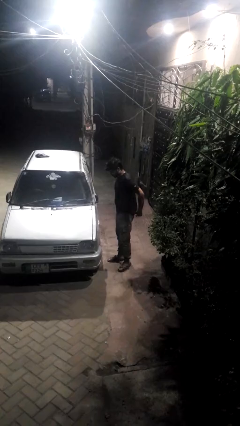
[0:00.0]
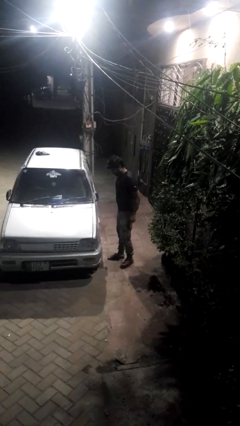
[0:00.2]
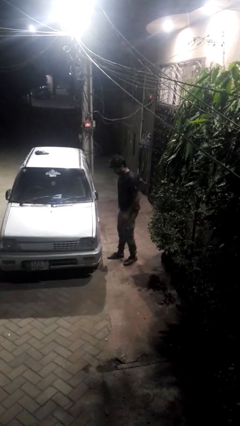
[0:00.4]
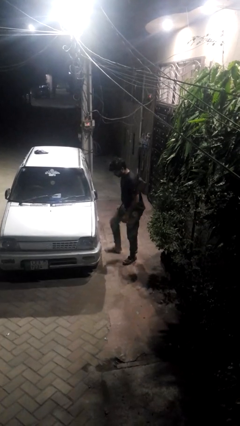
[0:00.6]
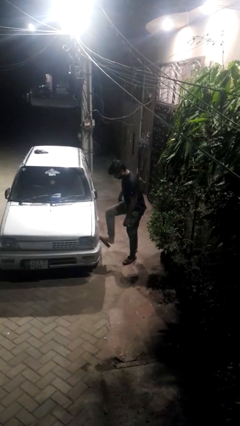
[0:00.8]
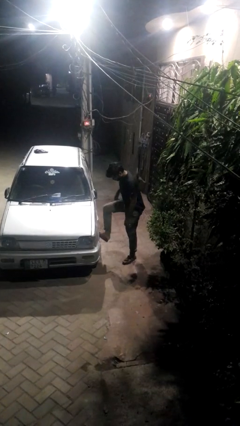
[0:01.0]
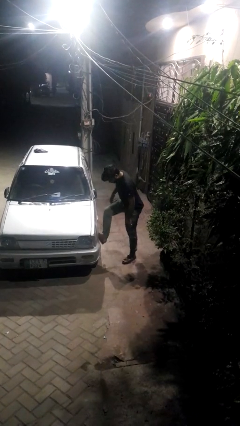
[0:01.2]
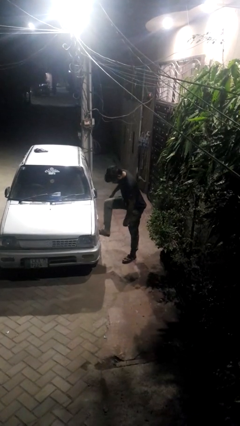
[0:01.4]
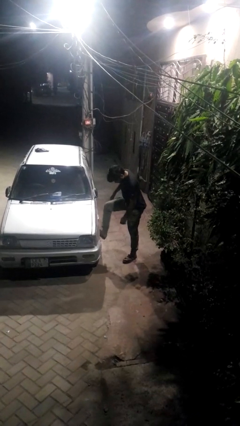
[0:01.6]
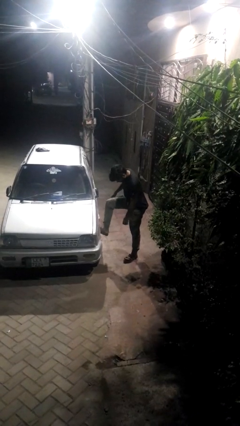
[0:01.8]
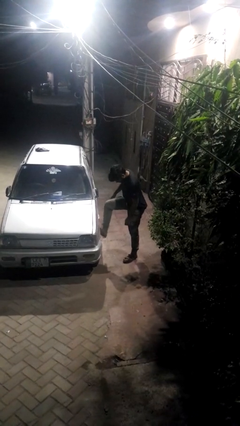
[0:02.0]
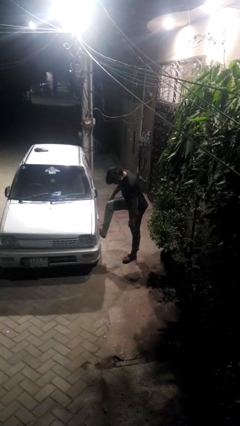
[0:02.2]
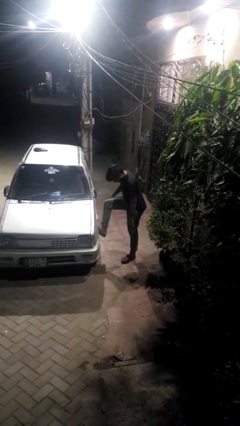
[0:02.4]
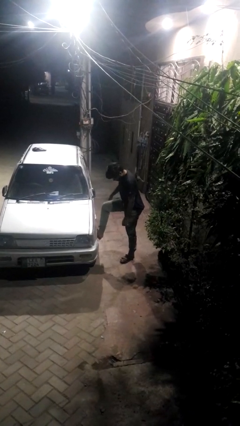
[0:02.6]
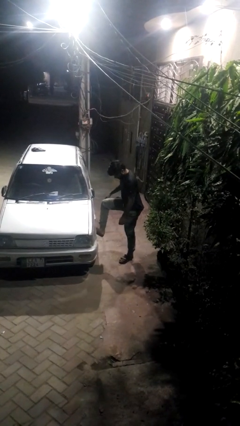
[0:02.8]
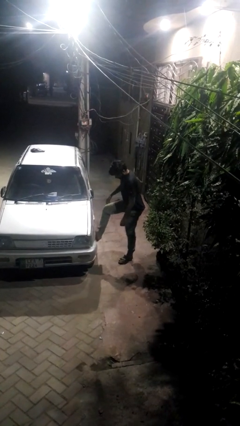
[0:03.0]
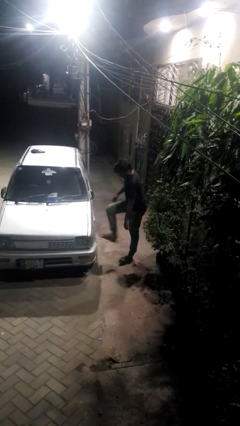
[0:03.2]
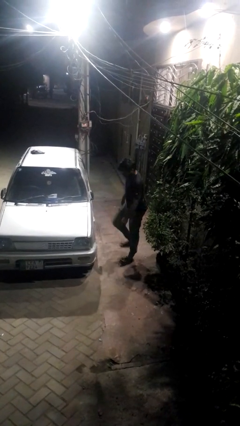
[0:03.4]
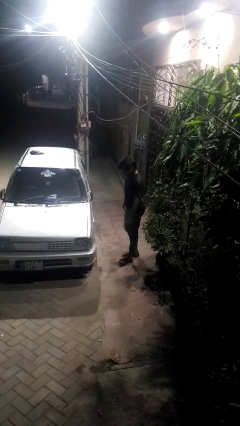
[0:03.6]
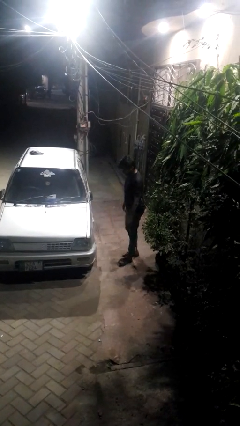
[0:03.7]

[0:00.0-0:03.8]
person kicks car tires

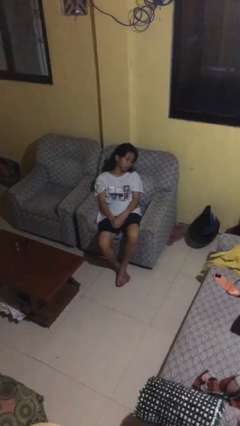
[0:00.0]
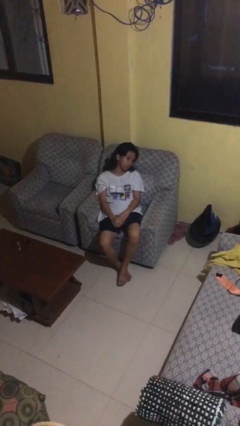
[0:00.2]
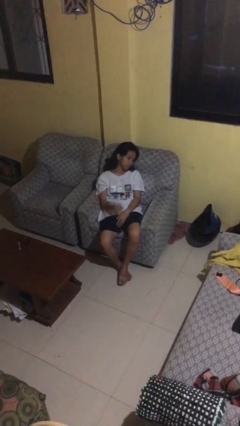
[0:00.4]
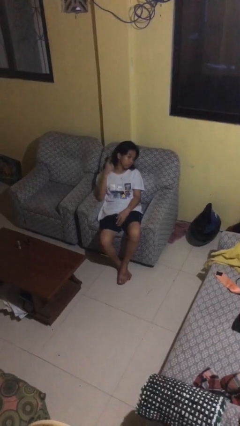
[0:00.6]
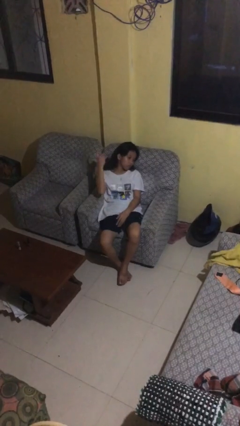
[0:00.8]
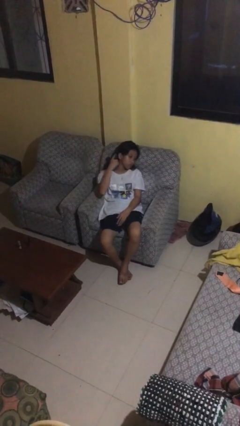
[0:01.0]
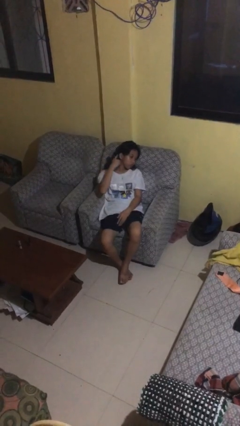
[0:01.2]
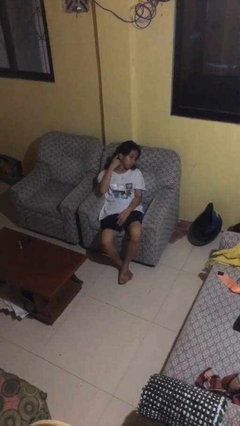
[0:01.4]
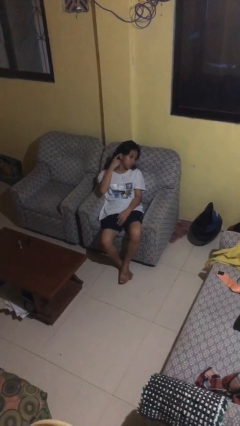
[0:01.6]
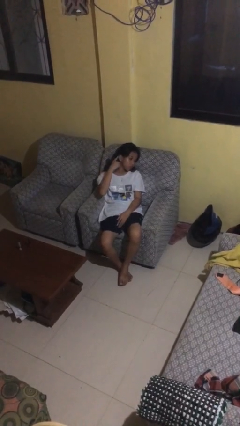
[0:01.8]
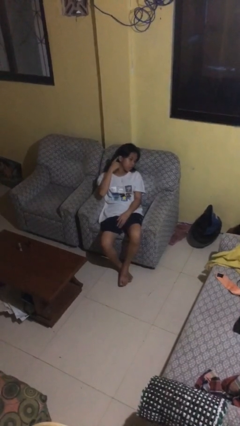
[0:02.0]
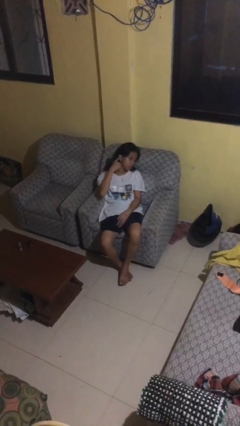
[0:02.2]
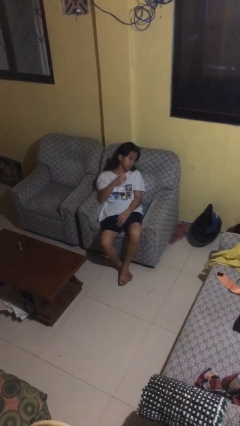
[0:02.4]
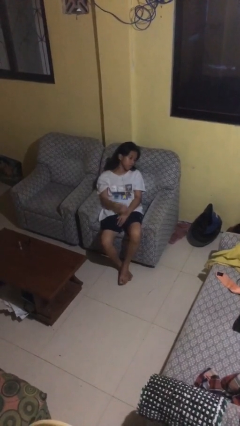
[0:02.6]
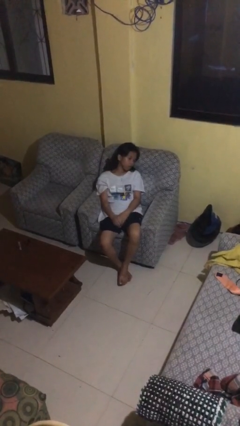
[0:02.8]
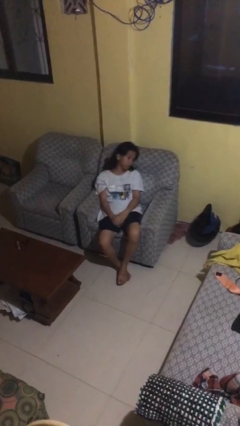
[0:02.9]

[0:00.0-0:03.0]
person gestures listen closely

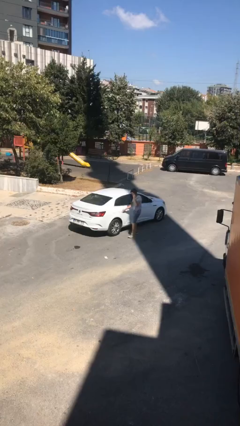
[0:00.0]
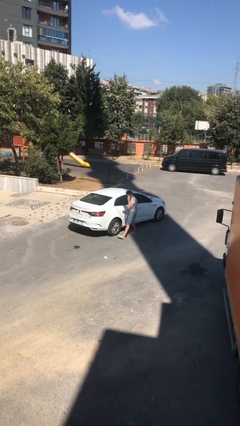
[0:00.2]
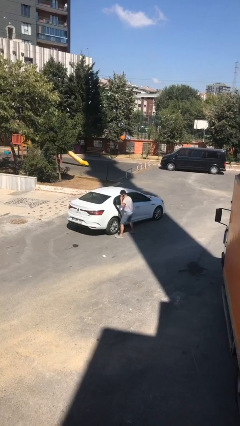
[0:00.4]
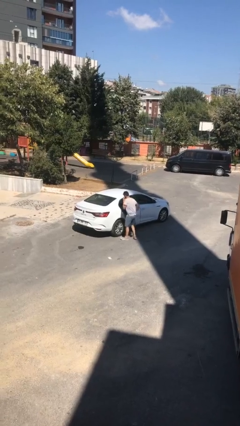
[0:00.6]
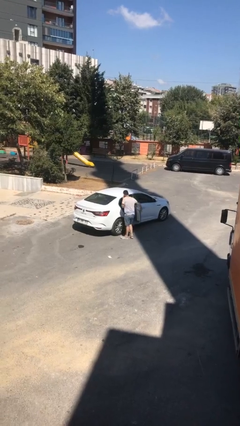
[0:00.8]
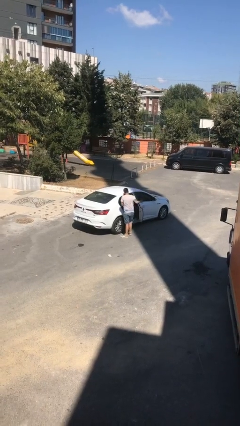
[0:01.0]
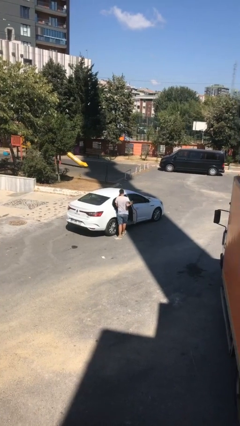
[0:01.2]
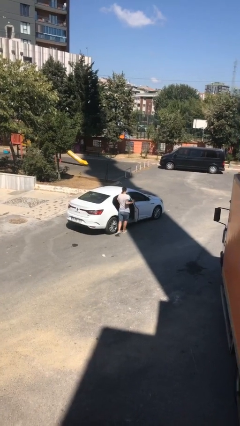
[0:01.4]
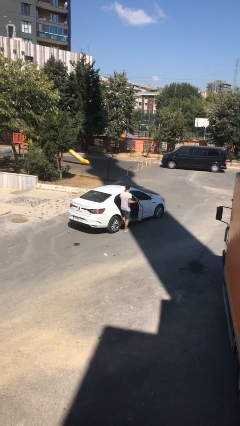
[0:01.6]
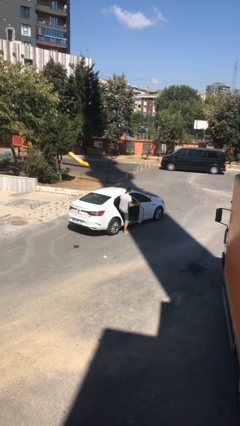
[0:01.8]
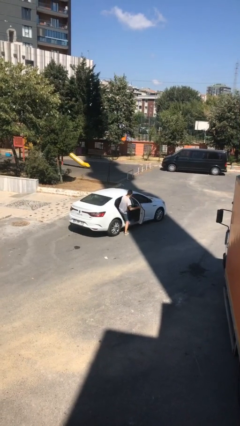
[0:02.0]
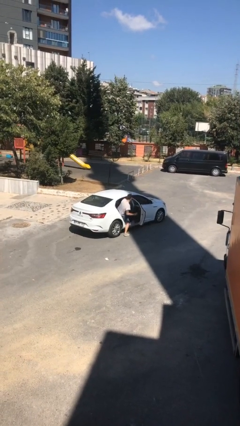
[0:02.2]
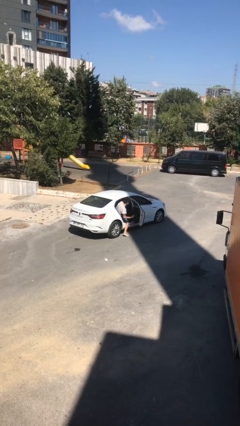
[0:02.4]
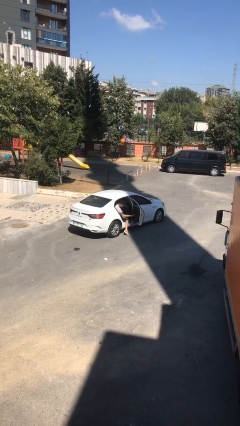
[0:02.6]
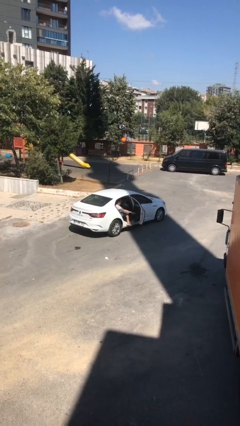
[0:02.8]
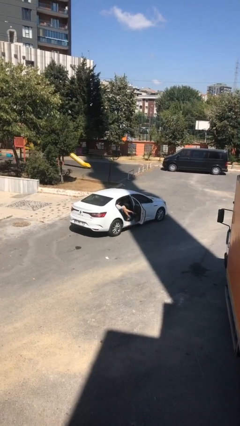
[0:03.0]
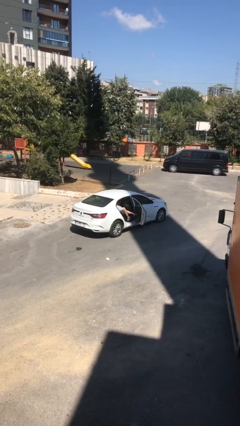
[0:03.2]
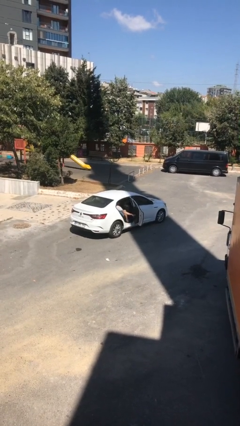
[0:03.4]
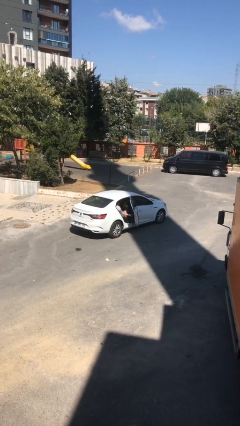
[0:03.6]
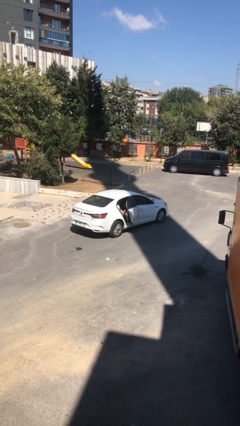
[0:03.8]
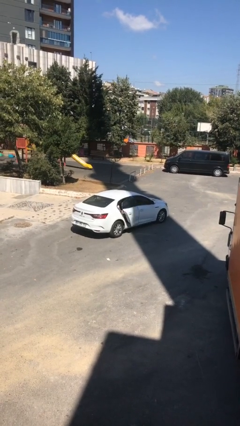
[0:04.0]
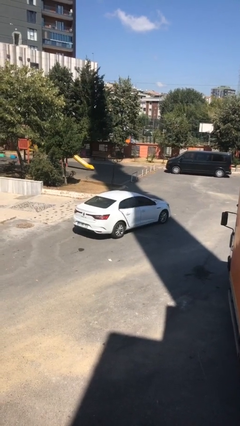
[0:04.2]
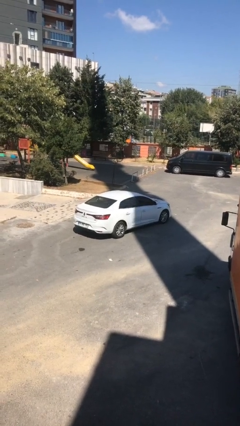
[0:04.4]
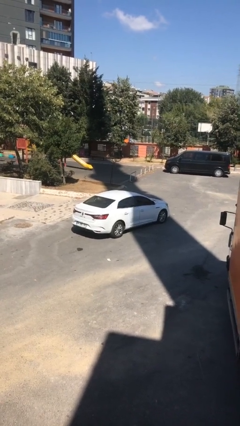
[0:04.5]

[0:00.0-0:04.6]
car picks up person

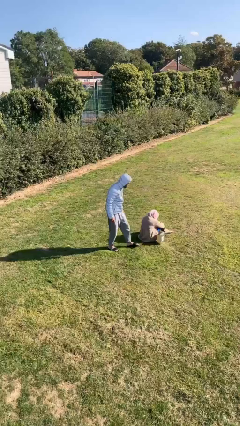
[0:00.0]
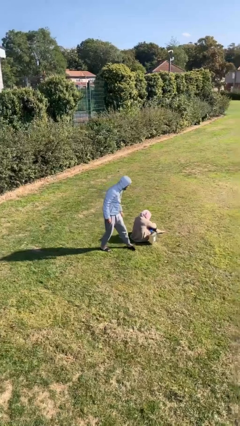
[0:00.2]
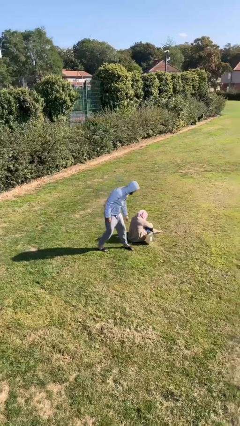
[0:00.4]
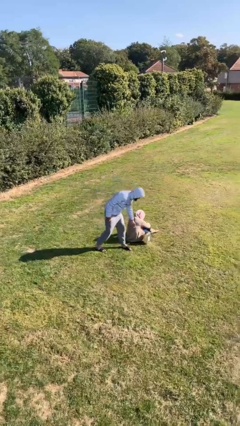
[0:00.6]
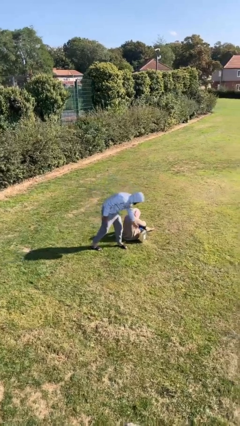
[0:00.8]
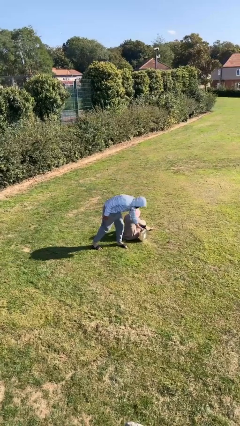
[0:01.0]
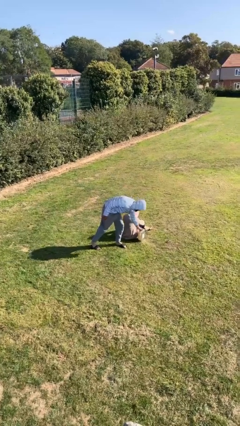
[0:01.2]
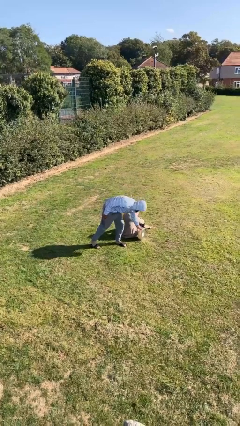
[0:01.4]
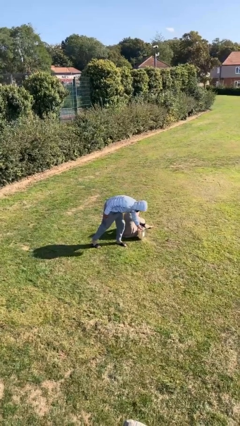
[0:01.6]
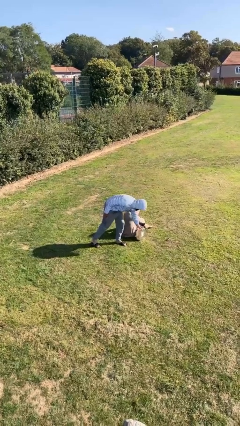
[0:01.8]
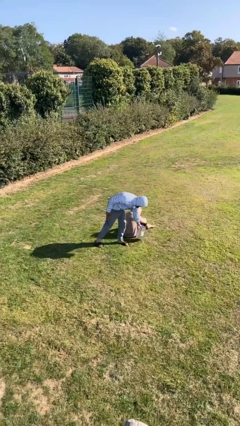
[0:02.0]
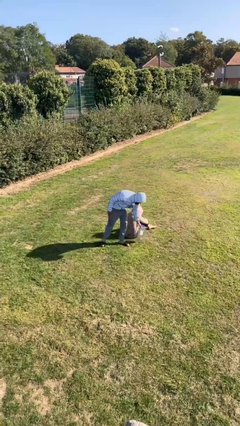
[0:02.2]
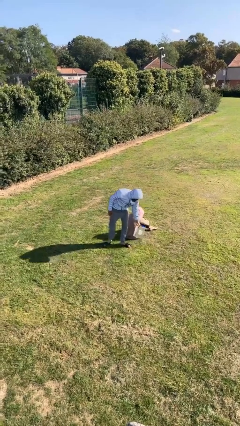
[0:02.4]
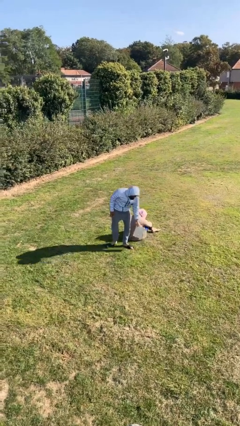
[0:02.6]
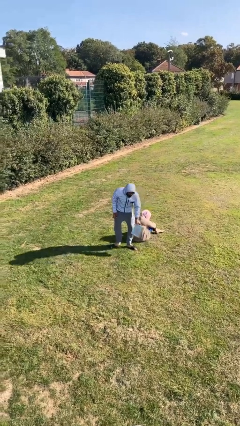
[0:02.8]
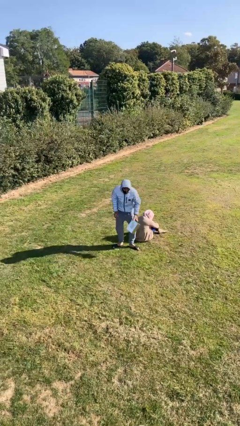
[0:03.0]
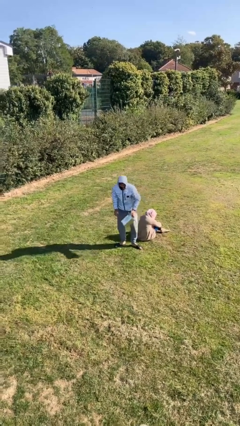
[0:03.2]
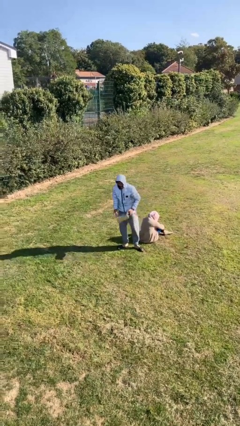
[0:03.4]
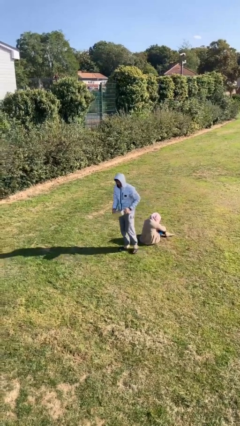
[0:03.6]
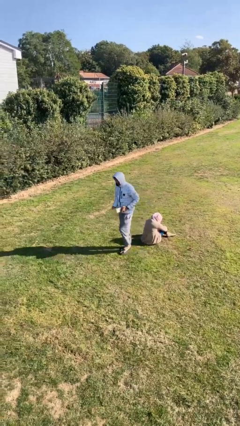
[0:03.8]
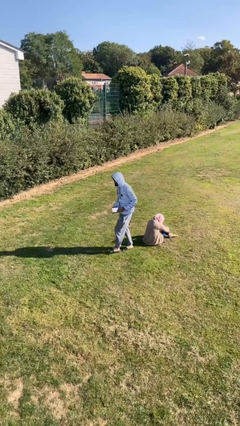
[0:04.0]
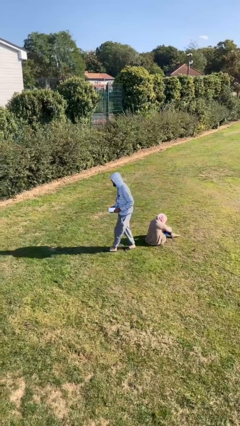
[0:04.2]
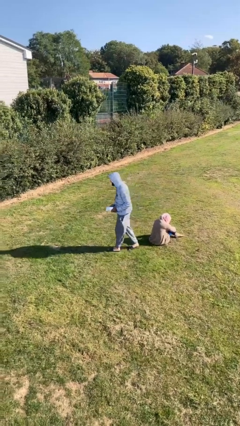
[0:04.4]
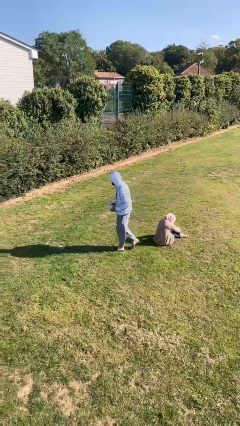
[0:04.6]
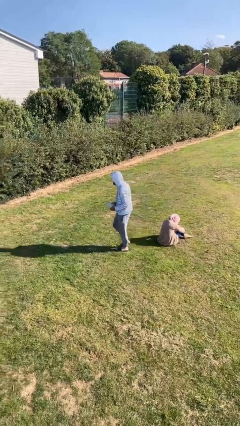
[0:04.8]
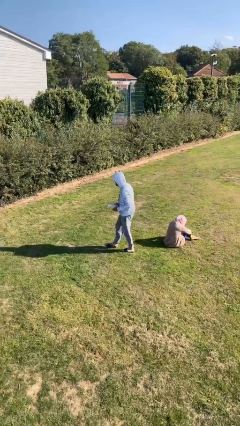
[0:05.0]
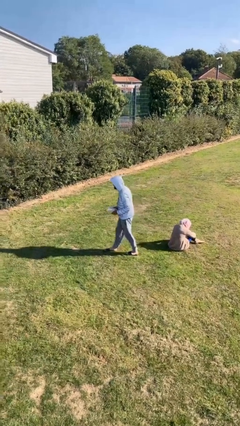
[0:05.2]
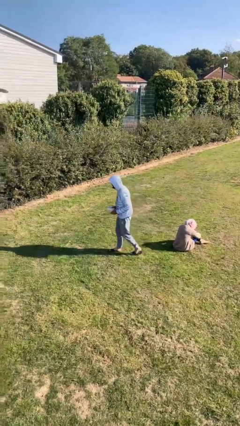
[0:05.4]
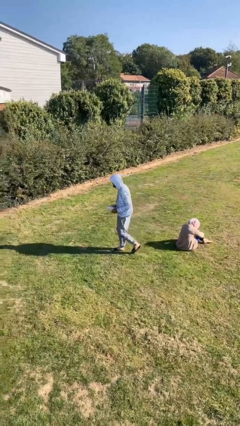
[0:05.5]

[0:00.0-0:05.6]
person steals object from person

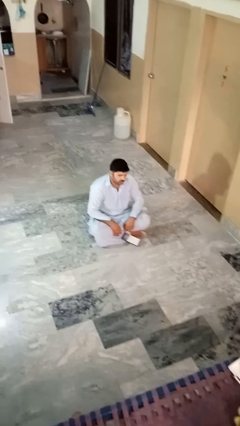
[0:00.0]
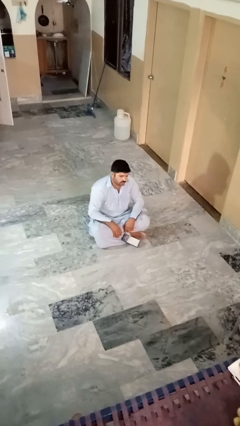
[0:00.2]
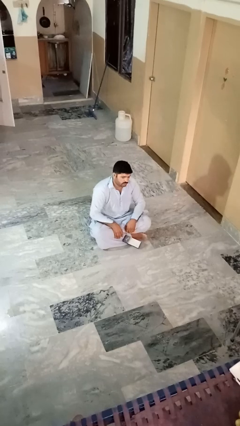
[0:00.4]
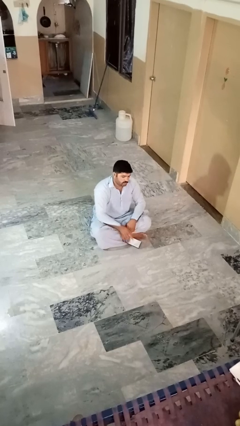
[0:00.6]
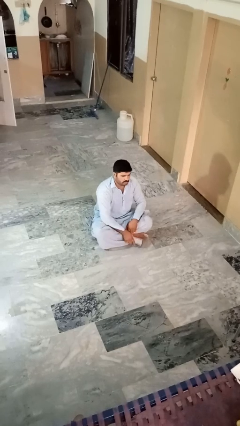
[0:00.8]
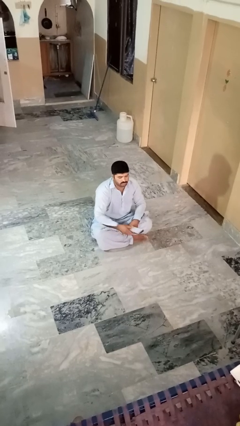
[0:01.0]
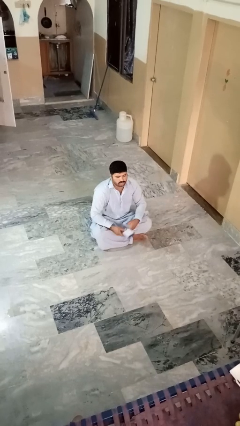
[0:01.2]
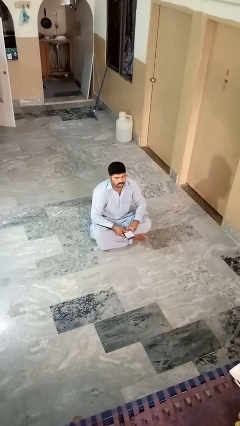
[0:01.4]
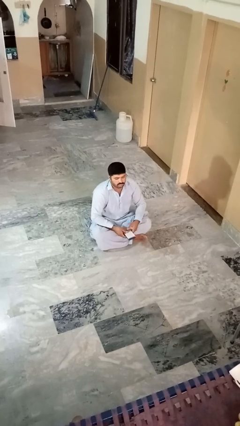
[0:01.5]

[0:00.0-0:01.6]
person picks up object from floor
